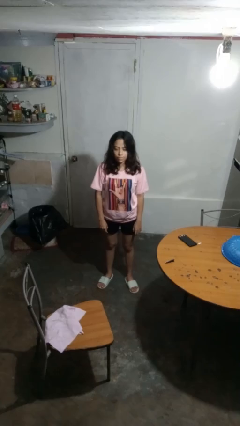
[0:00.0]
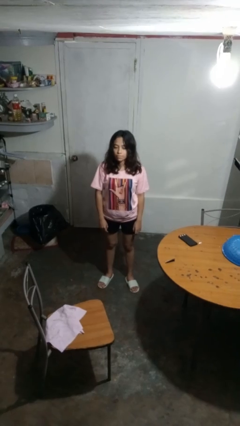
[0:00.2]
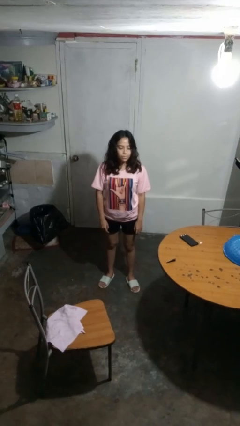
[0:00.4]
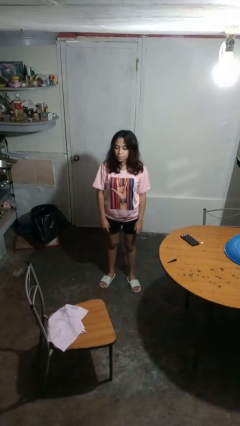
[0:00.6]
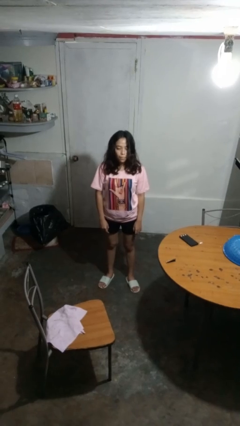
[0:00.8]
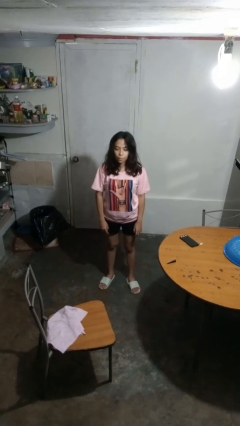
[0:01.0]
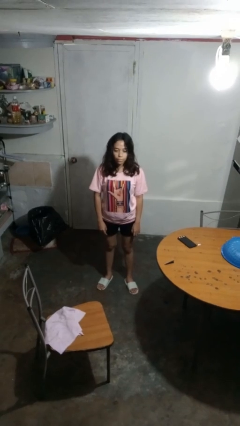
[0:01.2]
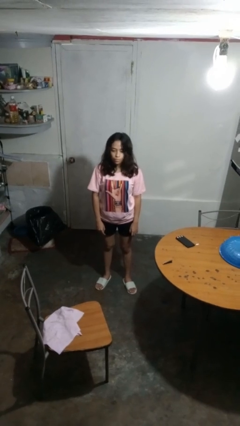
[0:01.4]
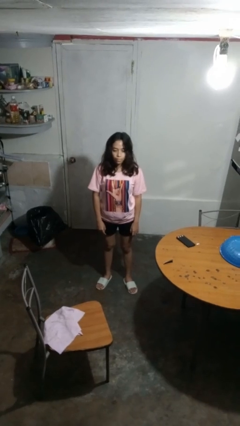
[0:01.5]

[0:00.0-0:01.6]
person shakes head

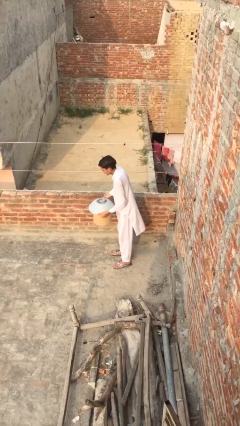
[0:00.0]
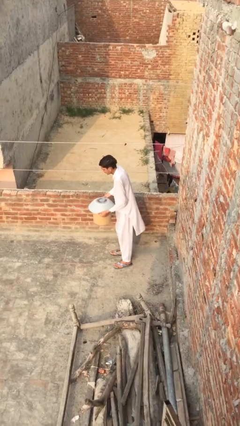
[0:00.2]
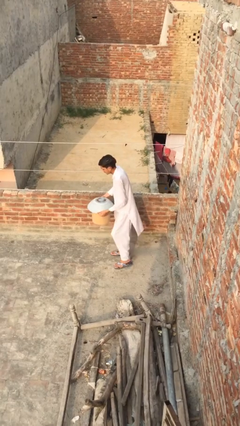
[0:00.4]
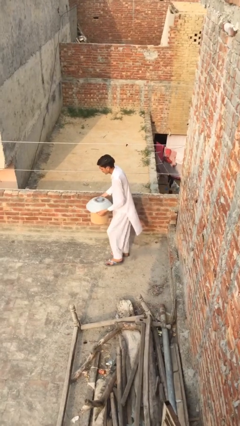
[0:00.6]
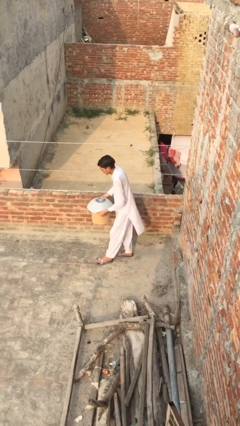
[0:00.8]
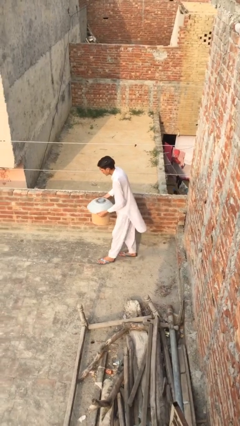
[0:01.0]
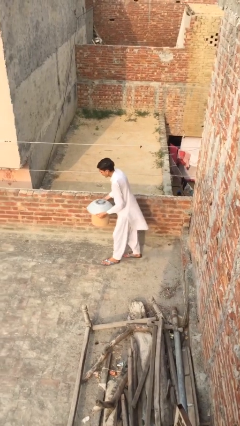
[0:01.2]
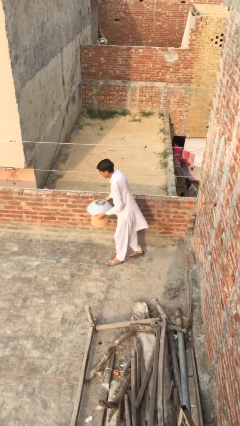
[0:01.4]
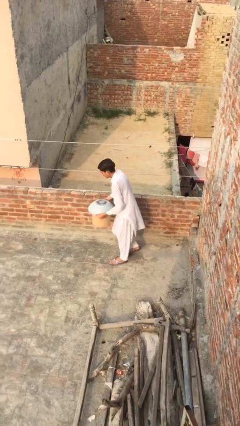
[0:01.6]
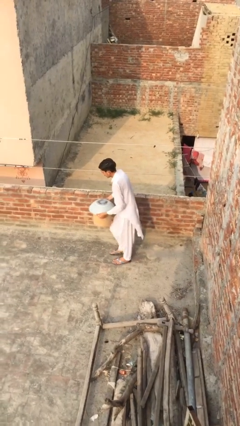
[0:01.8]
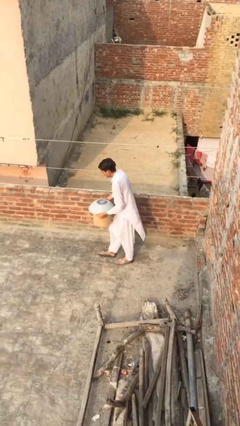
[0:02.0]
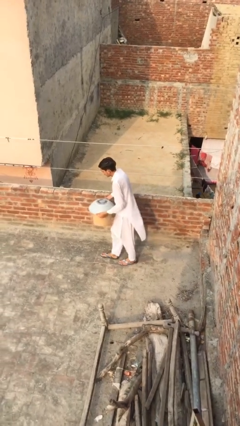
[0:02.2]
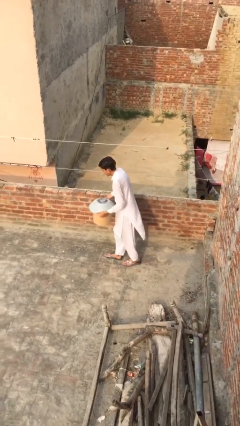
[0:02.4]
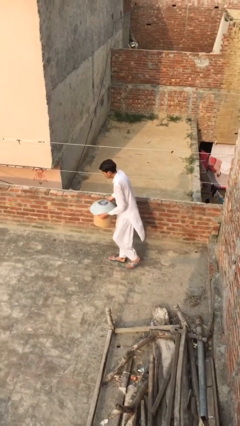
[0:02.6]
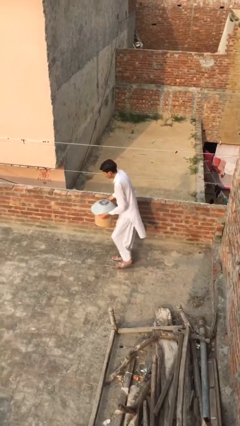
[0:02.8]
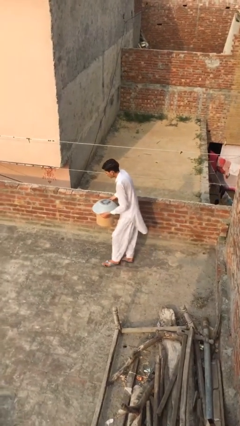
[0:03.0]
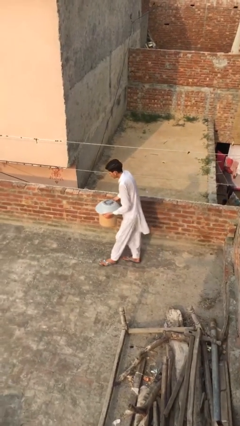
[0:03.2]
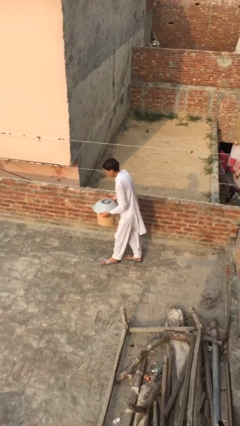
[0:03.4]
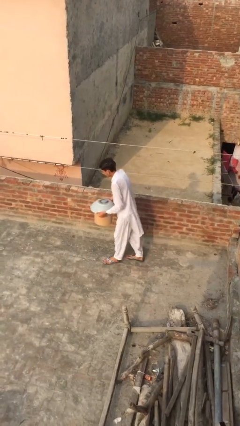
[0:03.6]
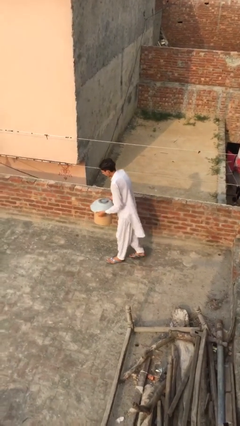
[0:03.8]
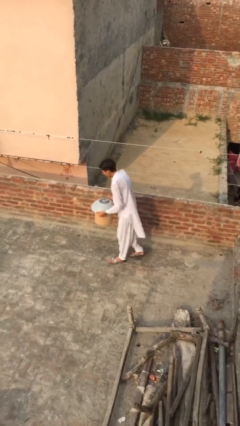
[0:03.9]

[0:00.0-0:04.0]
person carries heavy object

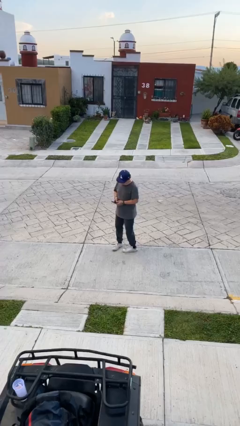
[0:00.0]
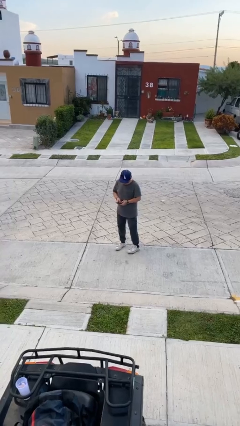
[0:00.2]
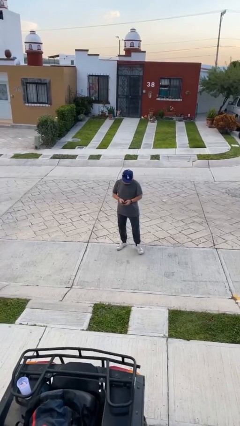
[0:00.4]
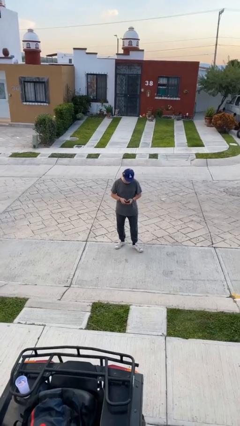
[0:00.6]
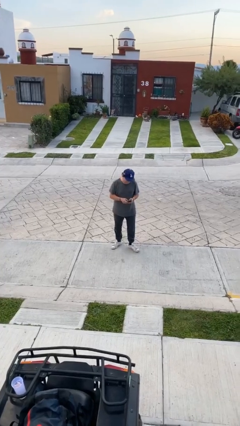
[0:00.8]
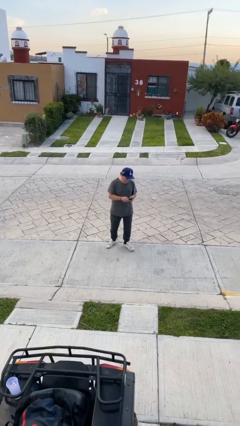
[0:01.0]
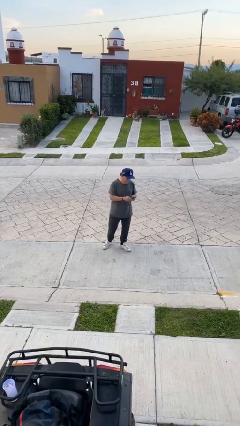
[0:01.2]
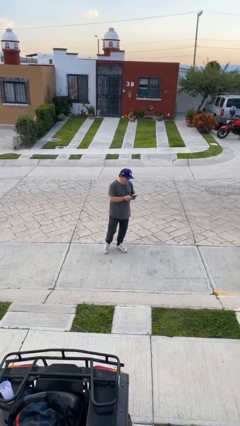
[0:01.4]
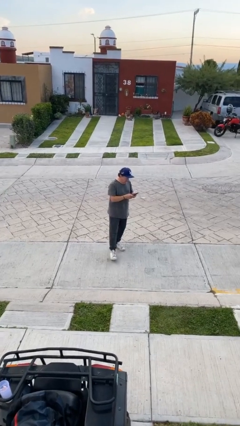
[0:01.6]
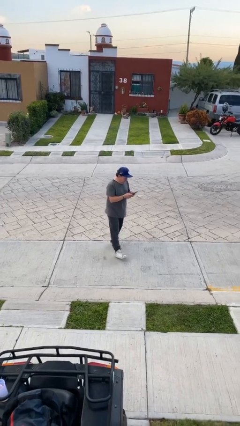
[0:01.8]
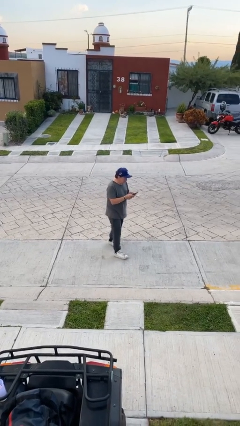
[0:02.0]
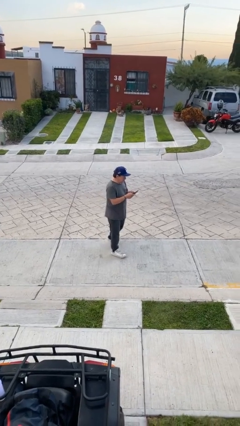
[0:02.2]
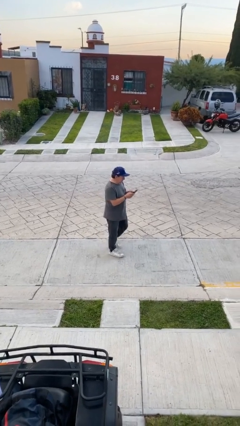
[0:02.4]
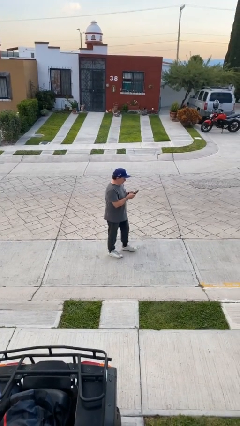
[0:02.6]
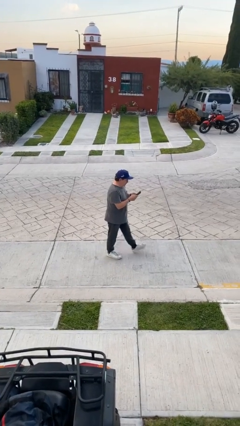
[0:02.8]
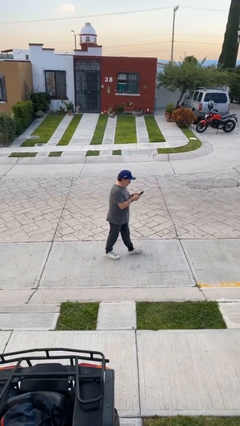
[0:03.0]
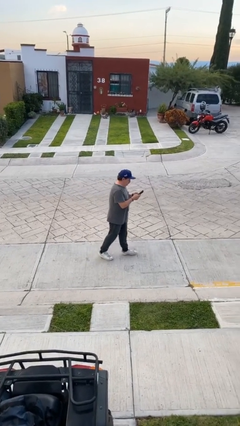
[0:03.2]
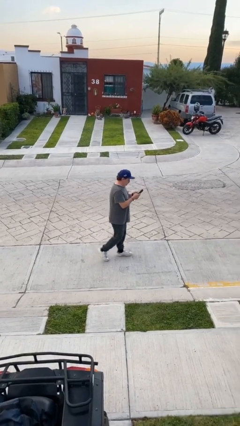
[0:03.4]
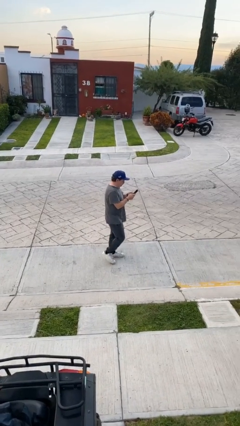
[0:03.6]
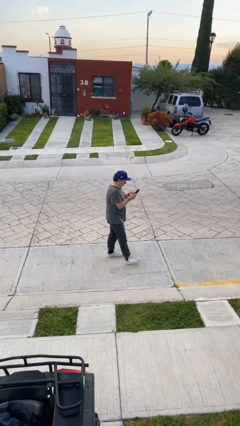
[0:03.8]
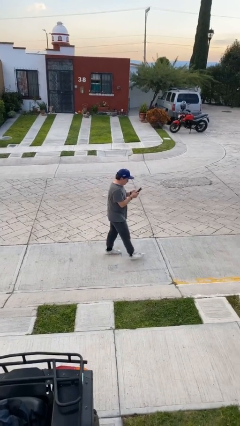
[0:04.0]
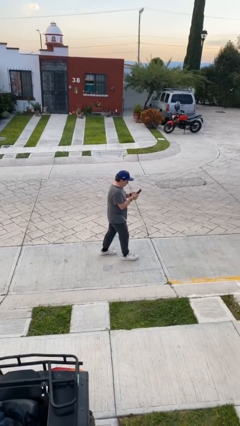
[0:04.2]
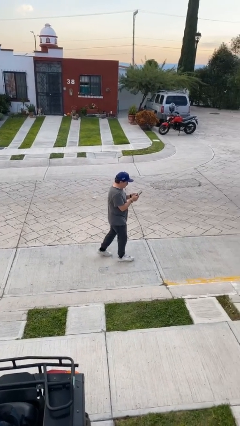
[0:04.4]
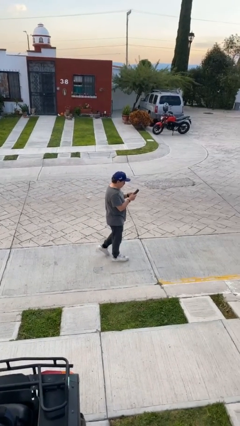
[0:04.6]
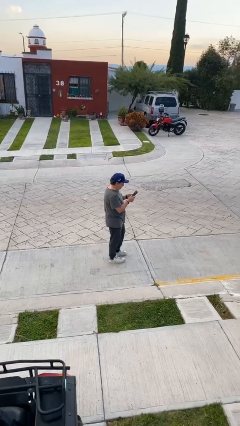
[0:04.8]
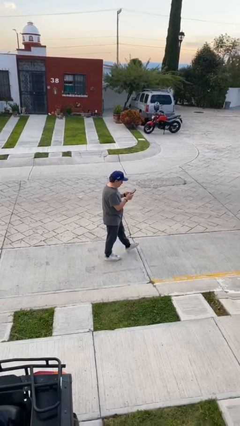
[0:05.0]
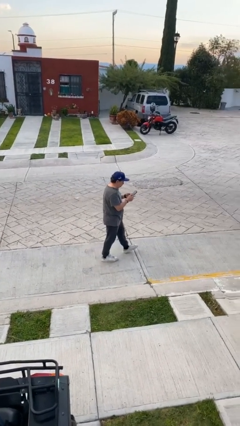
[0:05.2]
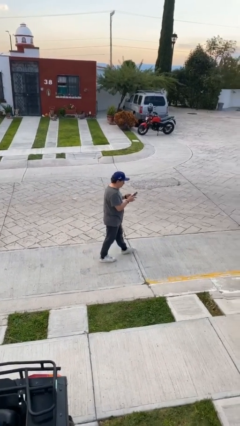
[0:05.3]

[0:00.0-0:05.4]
person texts on phone

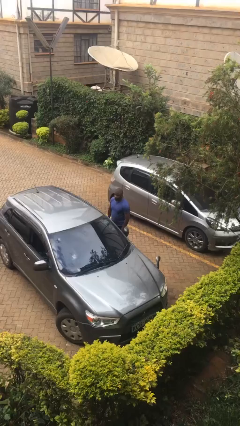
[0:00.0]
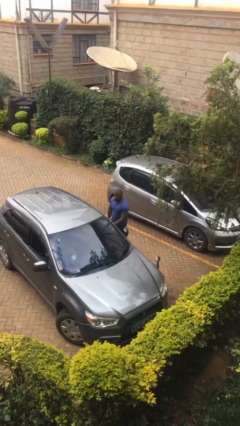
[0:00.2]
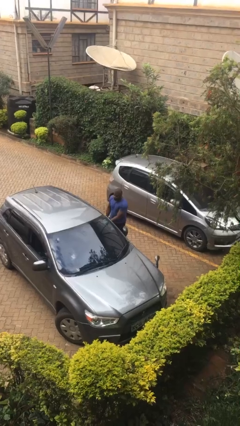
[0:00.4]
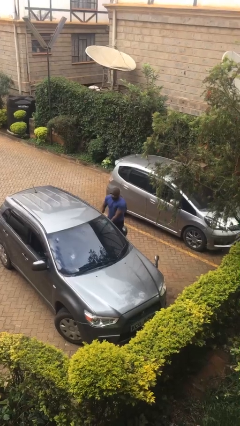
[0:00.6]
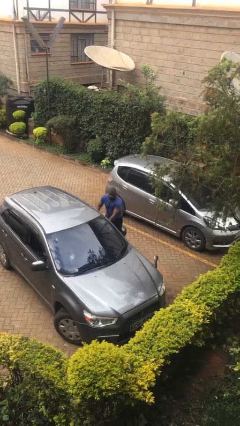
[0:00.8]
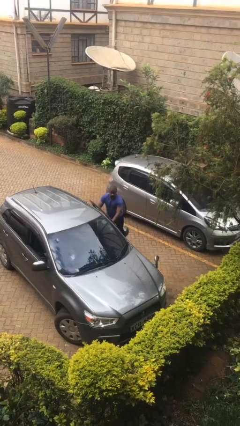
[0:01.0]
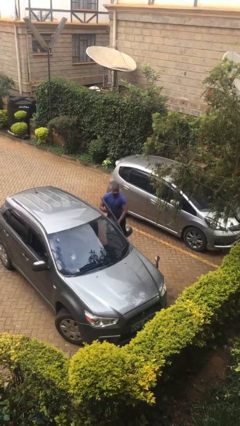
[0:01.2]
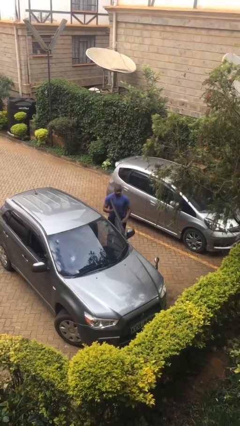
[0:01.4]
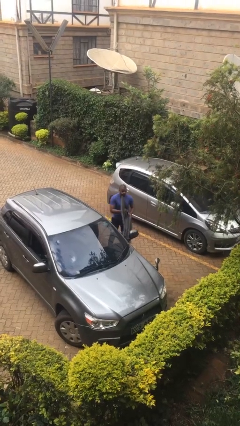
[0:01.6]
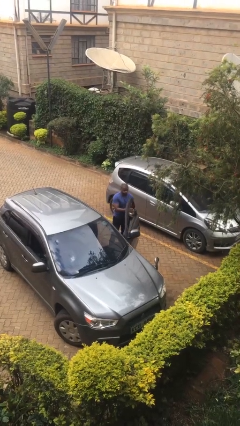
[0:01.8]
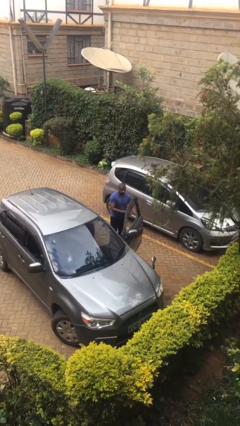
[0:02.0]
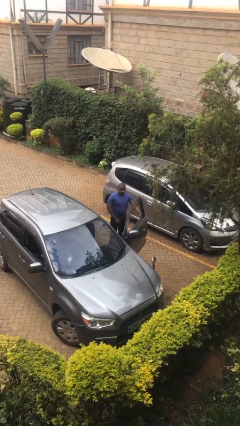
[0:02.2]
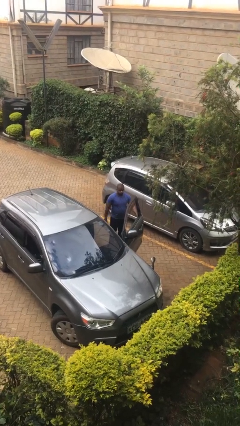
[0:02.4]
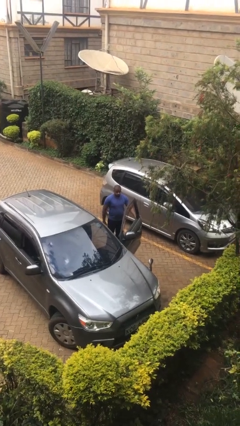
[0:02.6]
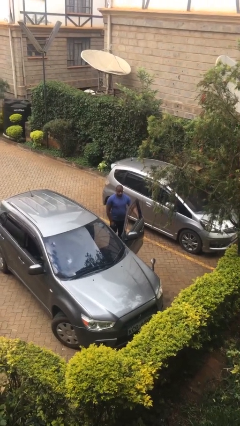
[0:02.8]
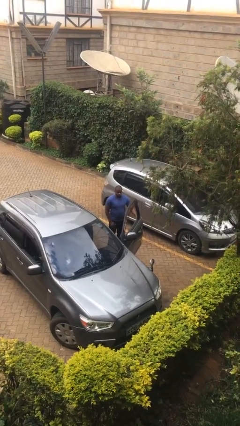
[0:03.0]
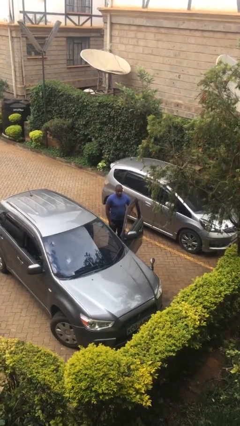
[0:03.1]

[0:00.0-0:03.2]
person opens car door

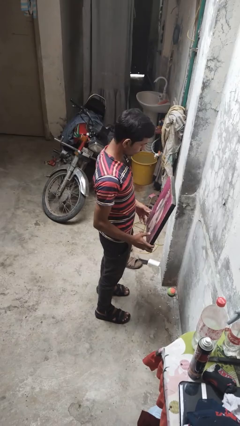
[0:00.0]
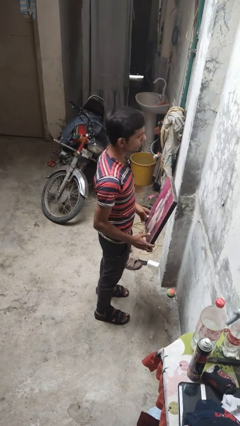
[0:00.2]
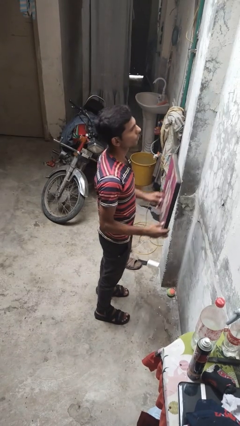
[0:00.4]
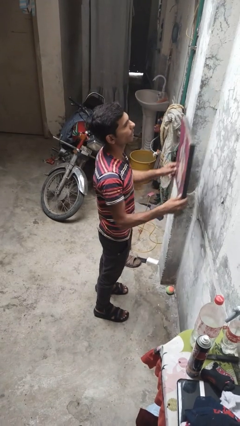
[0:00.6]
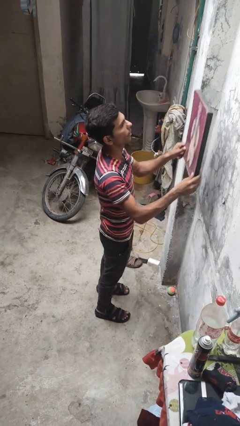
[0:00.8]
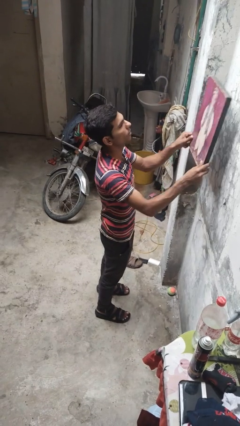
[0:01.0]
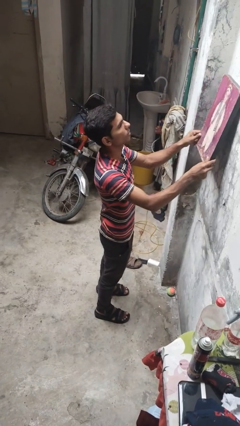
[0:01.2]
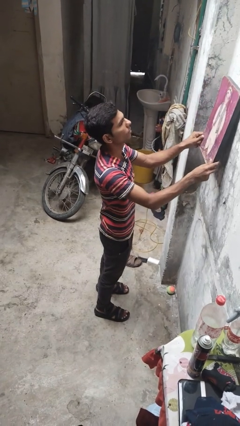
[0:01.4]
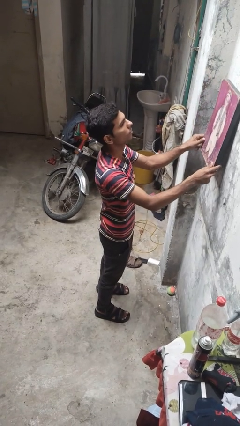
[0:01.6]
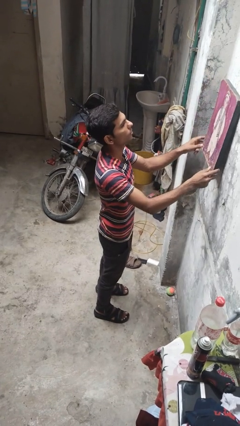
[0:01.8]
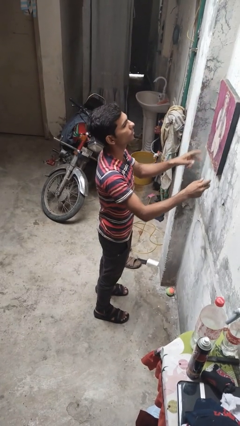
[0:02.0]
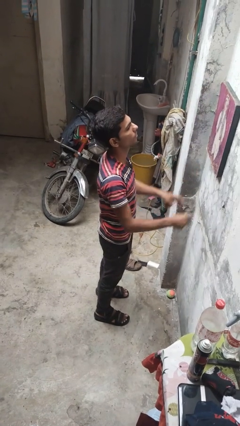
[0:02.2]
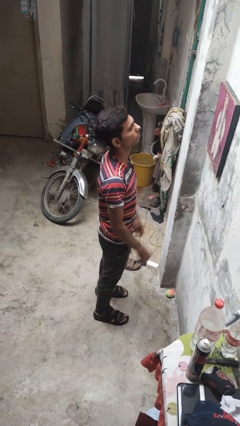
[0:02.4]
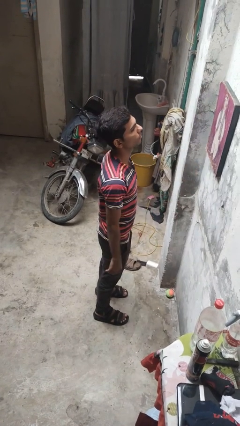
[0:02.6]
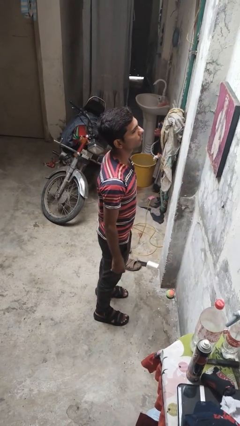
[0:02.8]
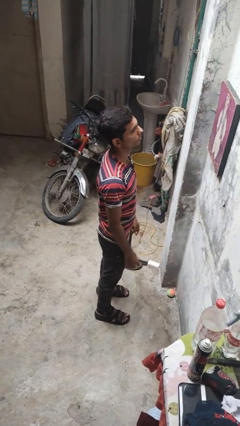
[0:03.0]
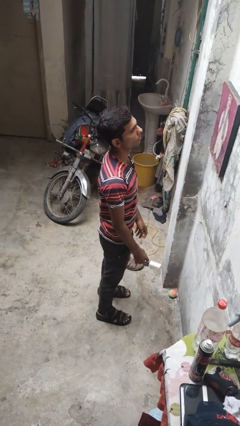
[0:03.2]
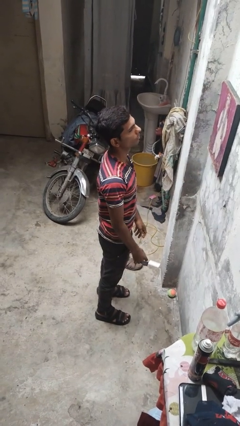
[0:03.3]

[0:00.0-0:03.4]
person puts up picture frame
